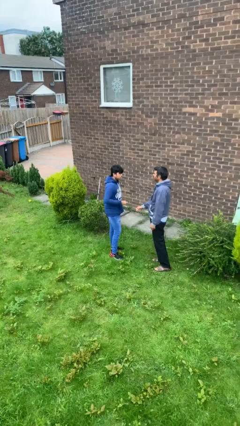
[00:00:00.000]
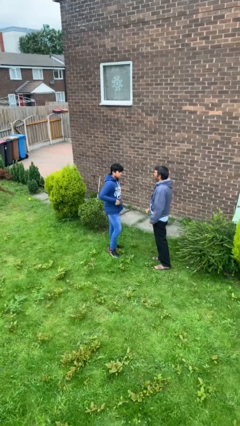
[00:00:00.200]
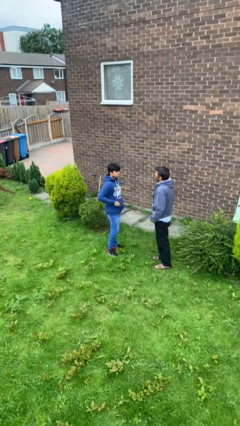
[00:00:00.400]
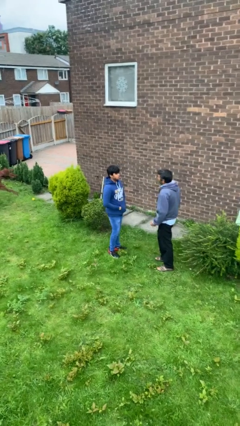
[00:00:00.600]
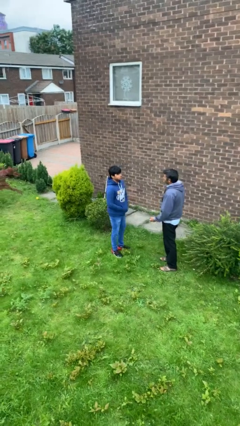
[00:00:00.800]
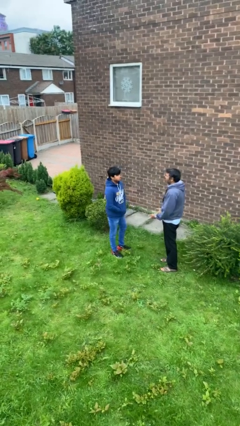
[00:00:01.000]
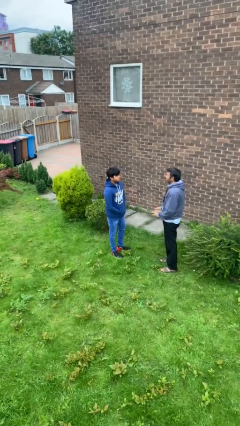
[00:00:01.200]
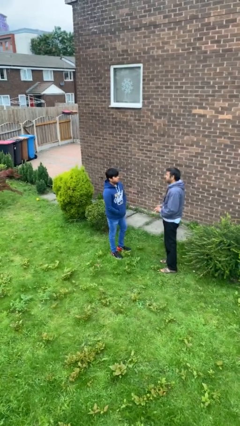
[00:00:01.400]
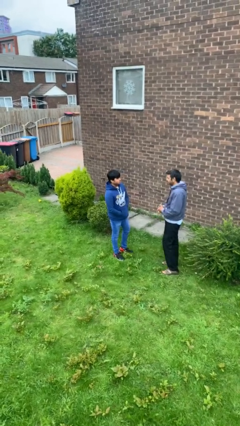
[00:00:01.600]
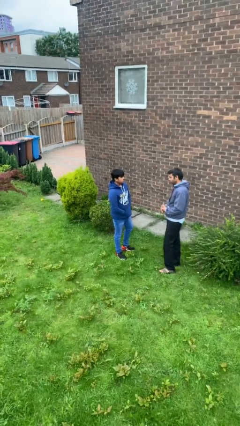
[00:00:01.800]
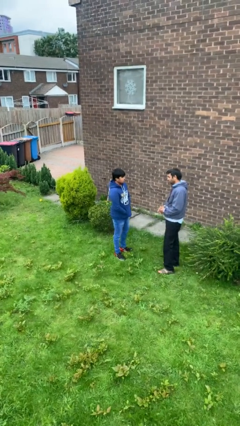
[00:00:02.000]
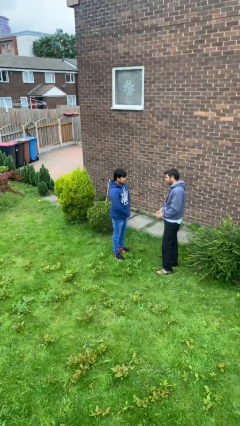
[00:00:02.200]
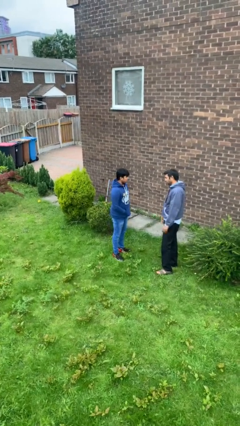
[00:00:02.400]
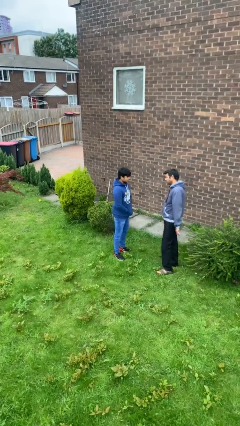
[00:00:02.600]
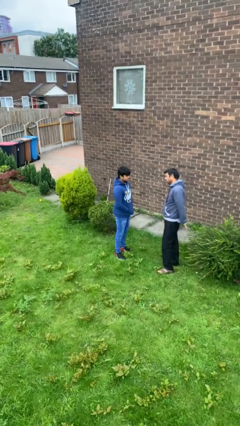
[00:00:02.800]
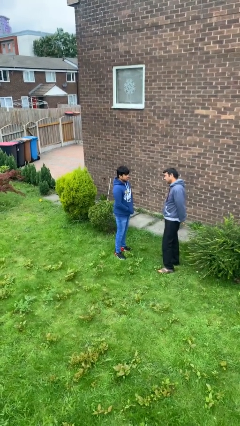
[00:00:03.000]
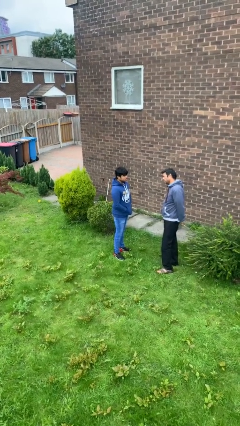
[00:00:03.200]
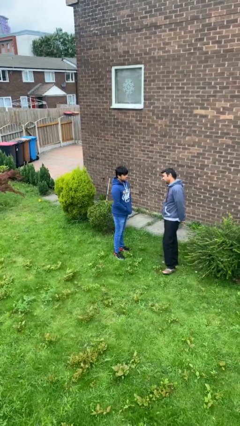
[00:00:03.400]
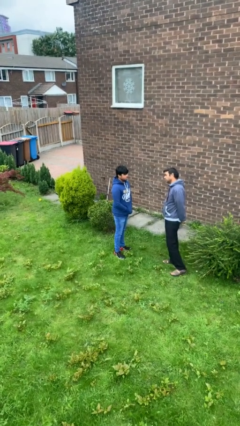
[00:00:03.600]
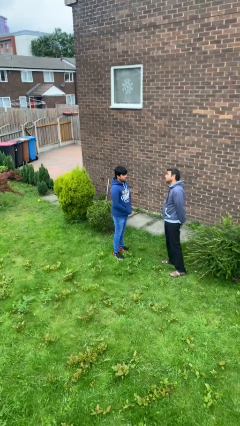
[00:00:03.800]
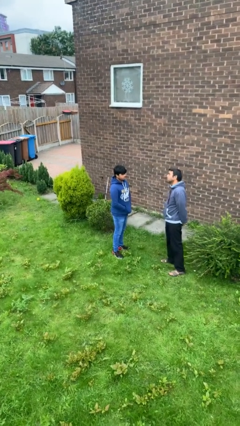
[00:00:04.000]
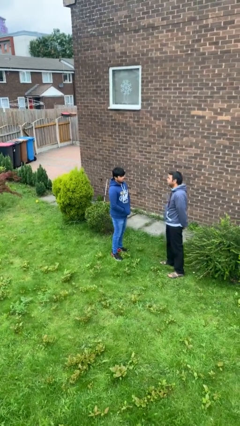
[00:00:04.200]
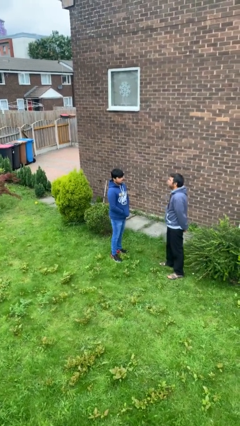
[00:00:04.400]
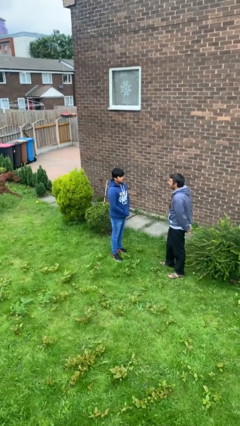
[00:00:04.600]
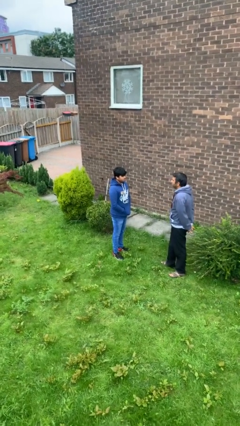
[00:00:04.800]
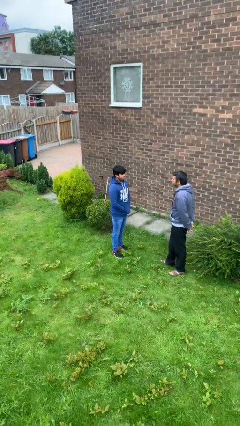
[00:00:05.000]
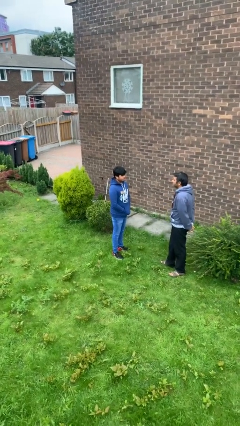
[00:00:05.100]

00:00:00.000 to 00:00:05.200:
person talks to person

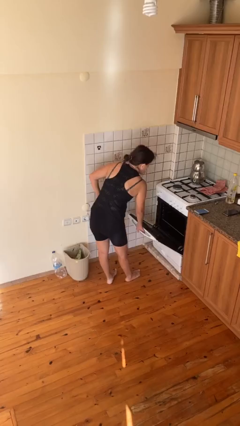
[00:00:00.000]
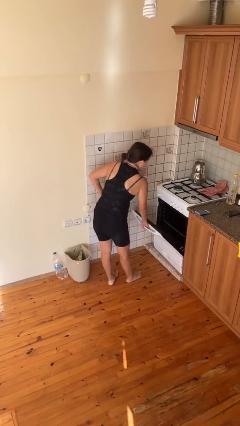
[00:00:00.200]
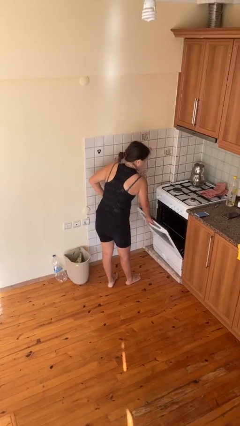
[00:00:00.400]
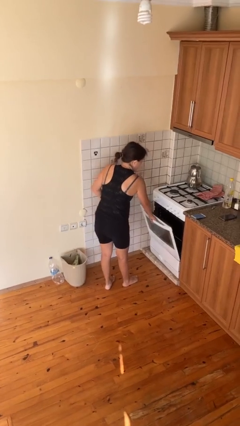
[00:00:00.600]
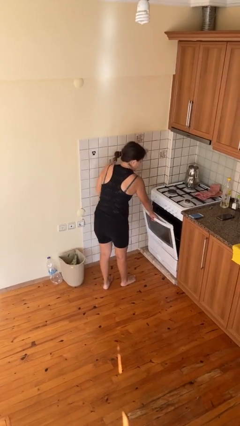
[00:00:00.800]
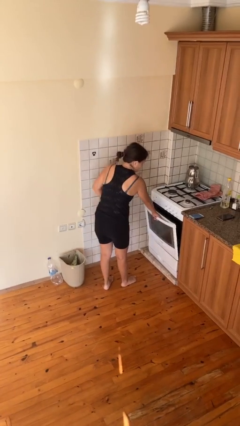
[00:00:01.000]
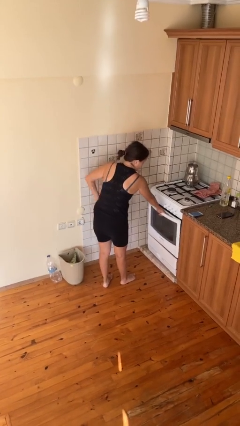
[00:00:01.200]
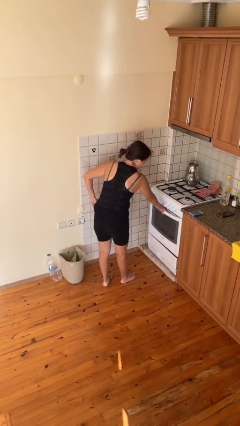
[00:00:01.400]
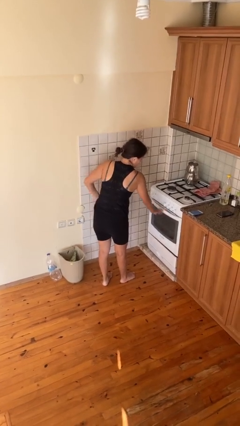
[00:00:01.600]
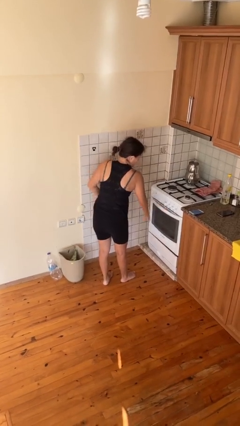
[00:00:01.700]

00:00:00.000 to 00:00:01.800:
person closes oven door

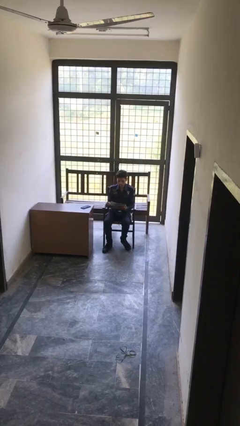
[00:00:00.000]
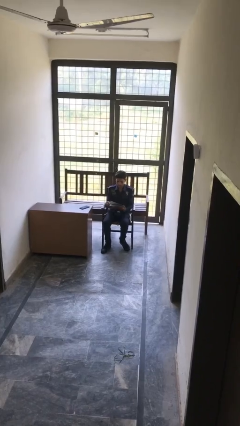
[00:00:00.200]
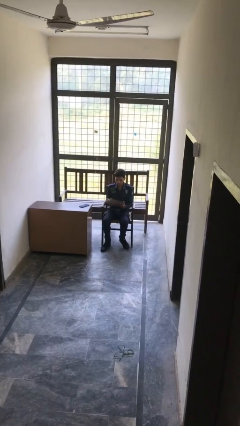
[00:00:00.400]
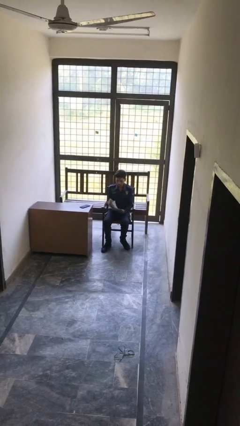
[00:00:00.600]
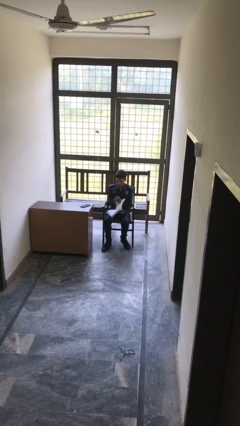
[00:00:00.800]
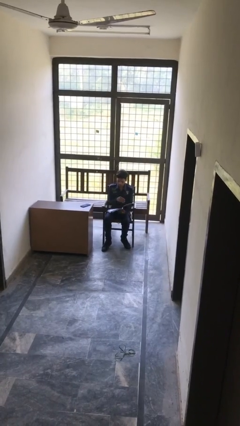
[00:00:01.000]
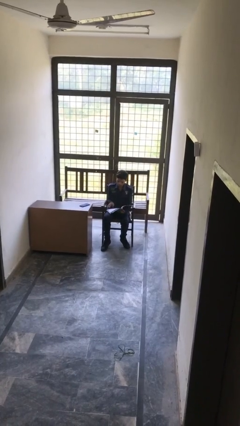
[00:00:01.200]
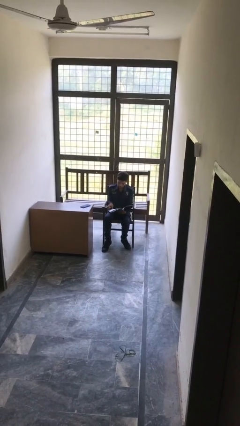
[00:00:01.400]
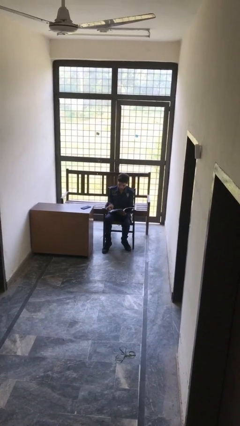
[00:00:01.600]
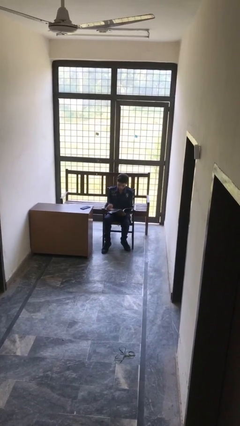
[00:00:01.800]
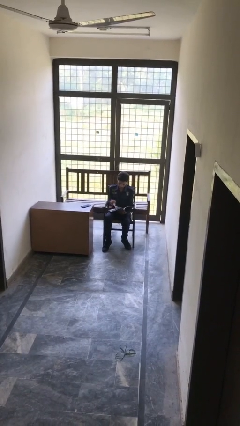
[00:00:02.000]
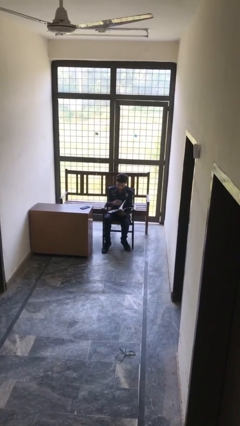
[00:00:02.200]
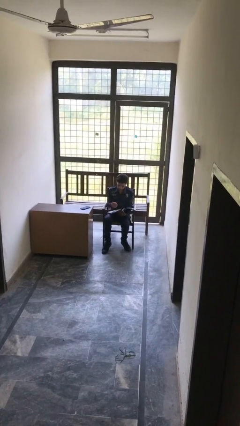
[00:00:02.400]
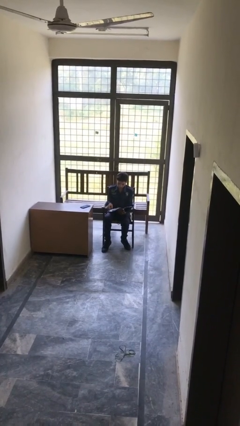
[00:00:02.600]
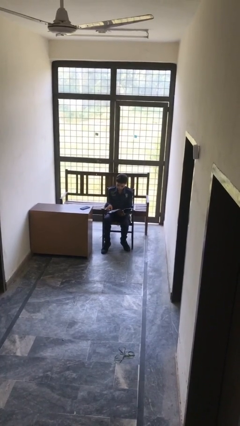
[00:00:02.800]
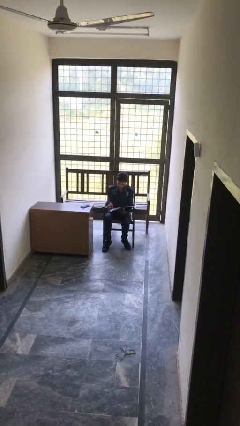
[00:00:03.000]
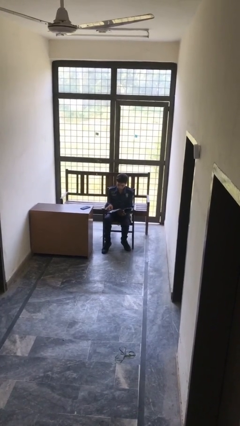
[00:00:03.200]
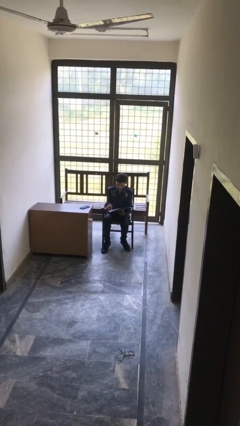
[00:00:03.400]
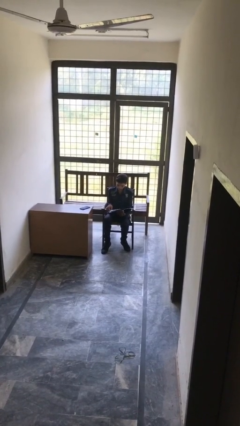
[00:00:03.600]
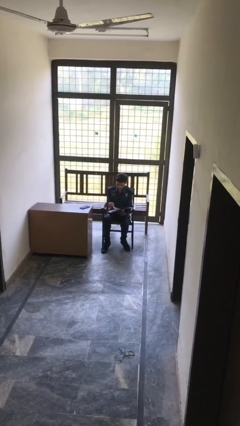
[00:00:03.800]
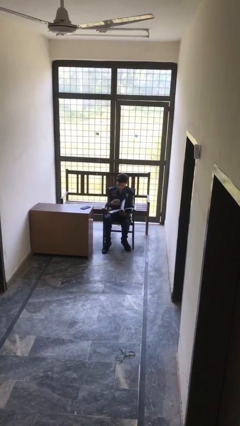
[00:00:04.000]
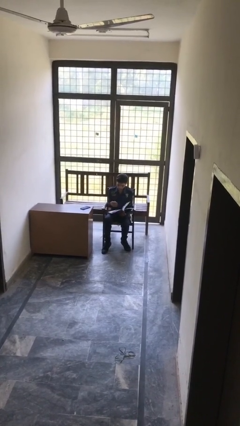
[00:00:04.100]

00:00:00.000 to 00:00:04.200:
person reads document

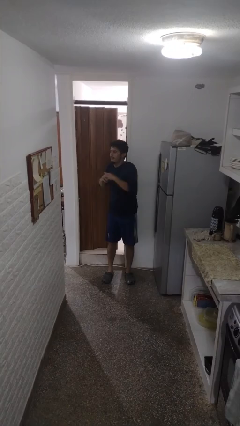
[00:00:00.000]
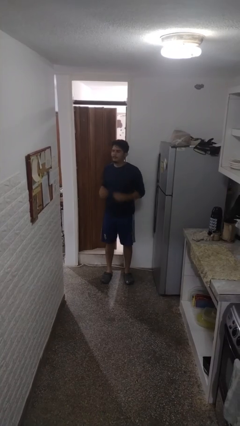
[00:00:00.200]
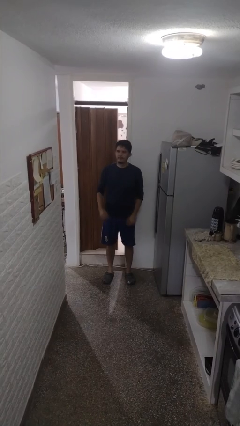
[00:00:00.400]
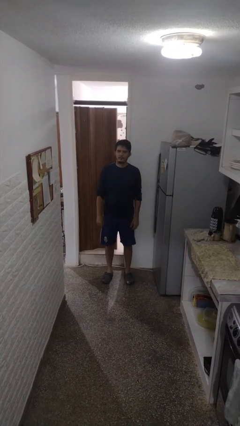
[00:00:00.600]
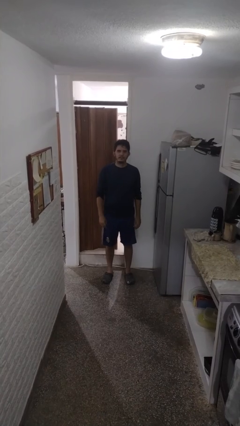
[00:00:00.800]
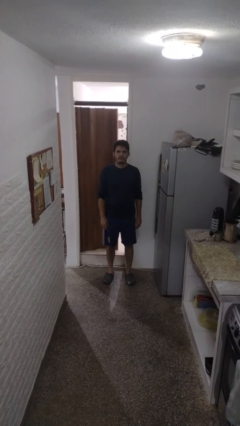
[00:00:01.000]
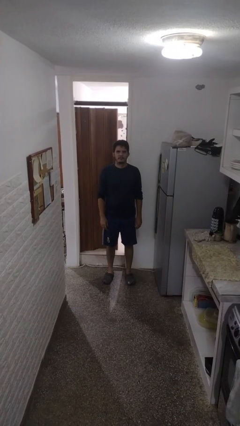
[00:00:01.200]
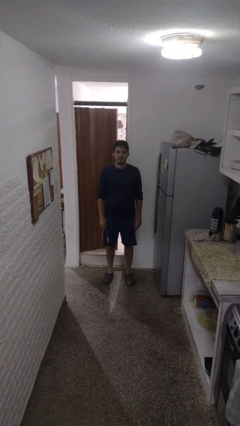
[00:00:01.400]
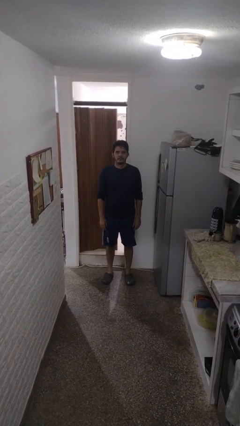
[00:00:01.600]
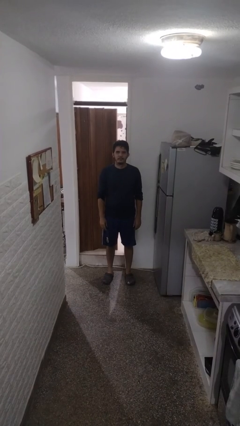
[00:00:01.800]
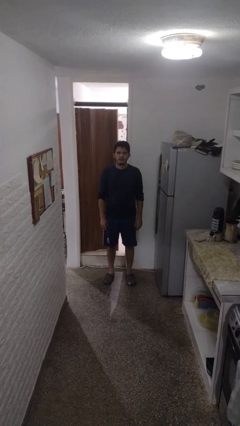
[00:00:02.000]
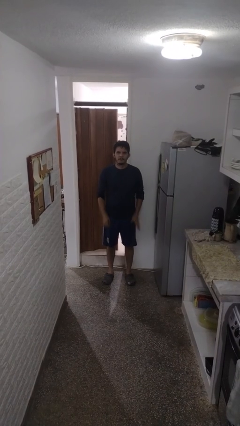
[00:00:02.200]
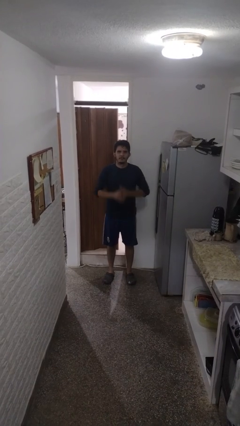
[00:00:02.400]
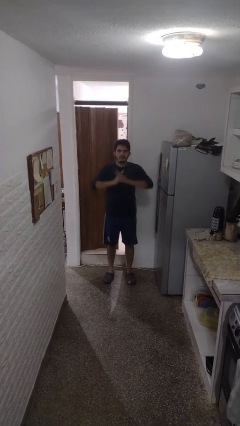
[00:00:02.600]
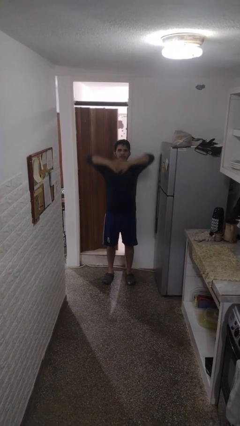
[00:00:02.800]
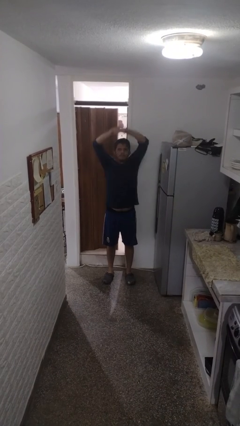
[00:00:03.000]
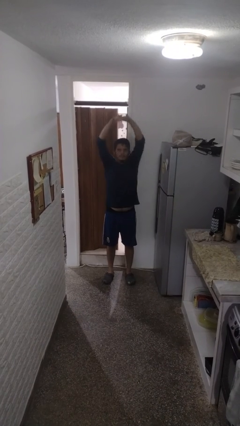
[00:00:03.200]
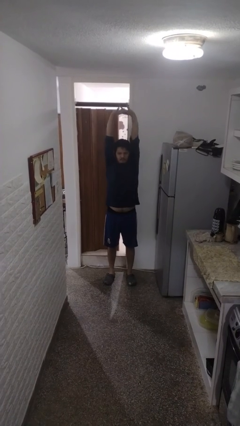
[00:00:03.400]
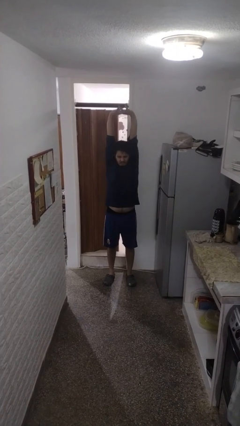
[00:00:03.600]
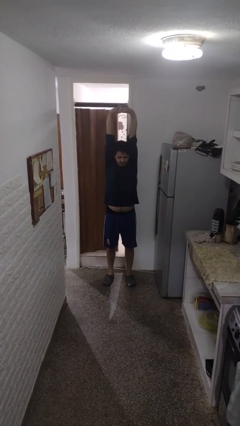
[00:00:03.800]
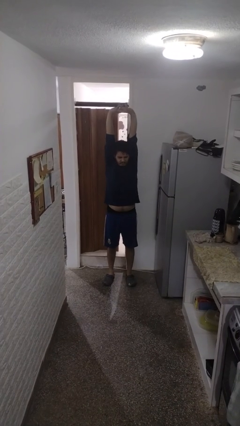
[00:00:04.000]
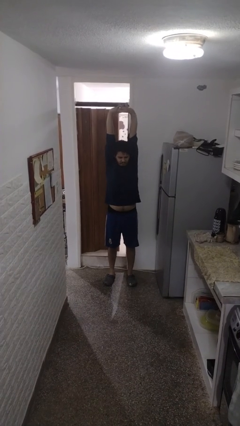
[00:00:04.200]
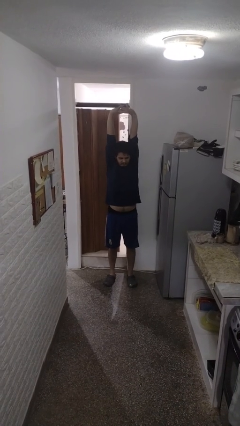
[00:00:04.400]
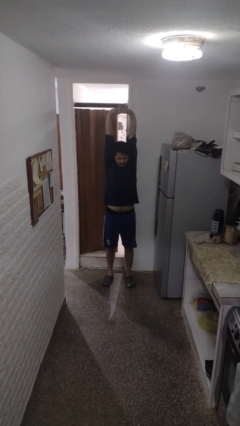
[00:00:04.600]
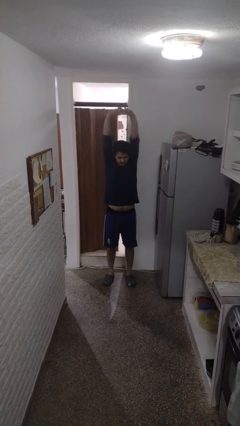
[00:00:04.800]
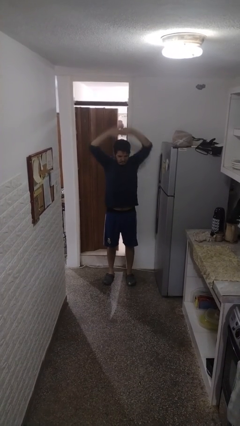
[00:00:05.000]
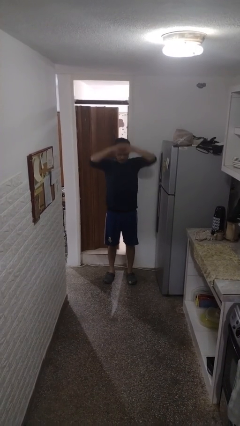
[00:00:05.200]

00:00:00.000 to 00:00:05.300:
person stretches arms over head

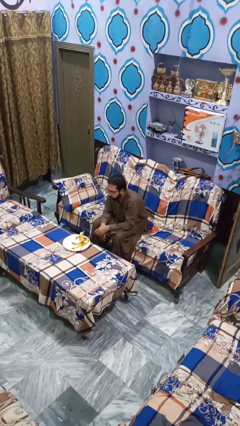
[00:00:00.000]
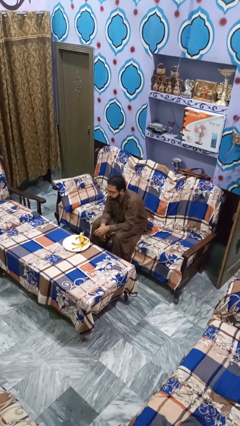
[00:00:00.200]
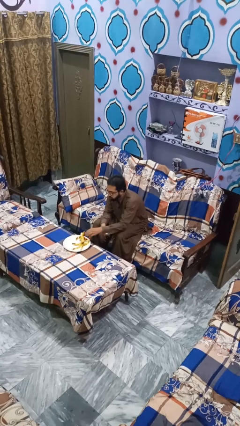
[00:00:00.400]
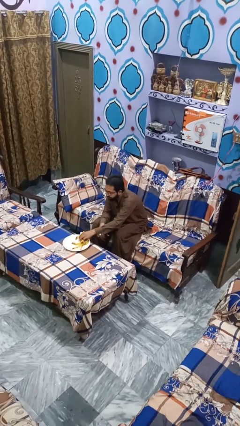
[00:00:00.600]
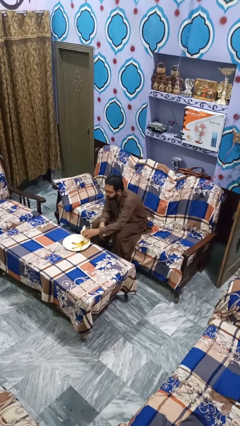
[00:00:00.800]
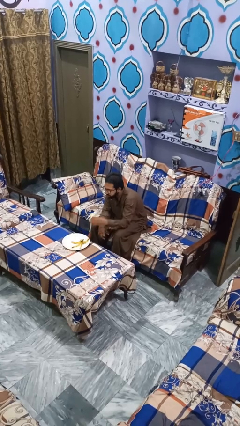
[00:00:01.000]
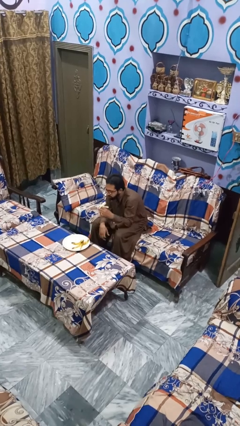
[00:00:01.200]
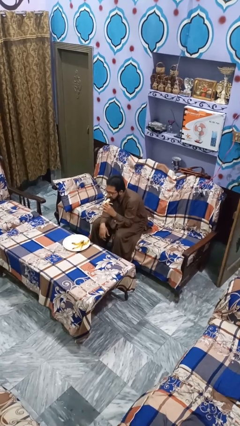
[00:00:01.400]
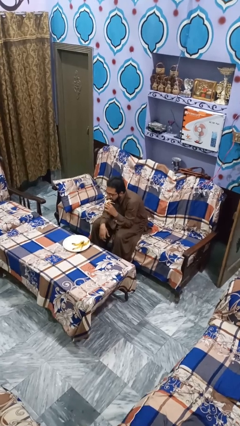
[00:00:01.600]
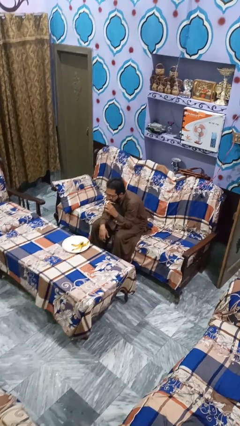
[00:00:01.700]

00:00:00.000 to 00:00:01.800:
person eats banana
